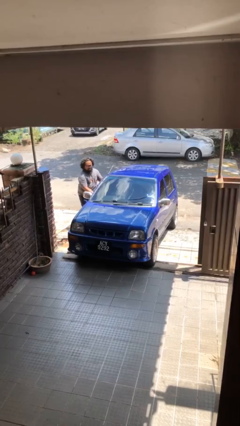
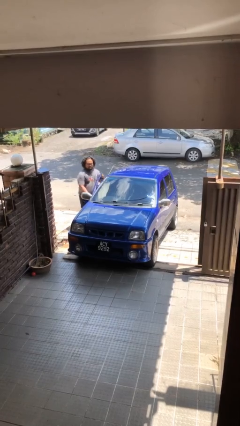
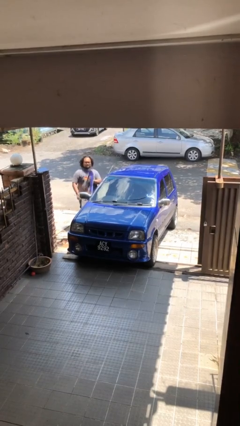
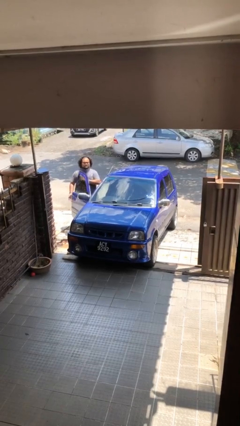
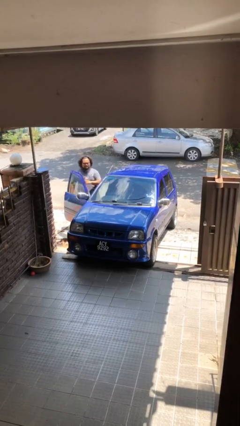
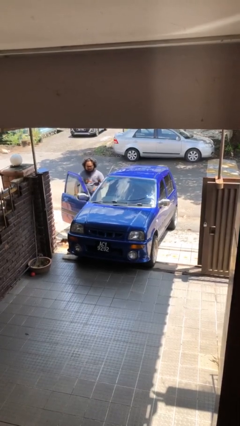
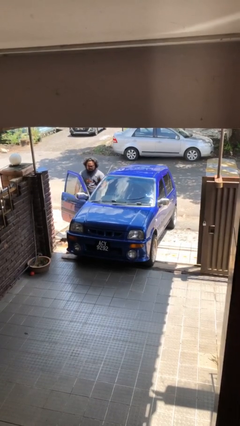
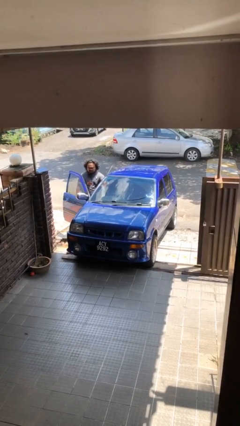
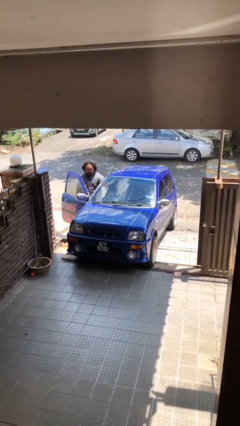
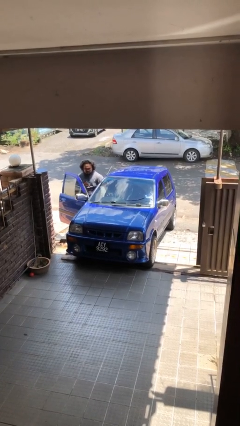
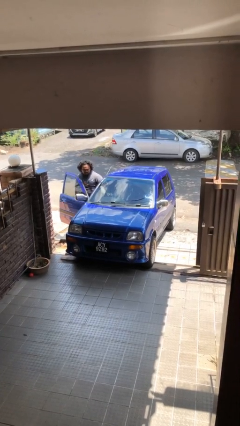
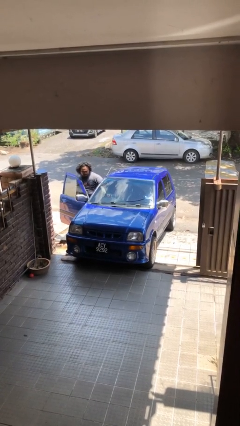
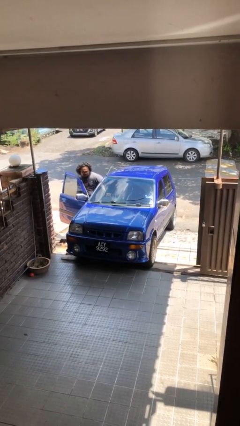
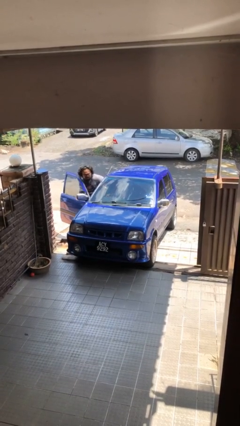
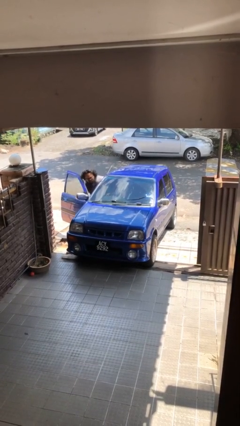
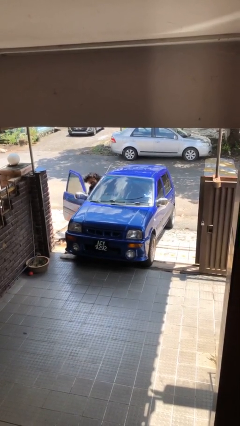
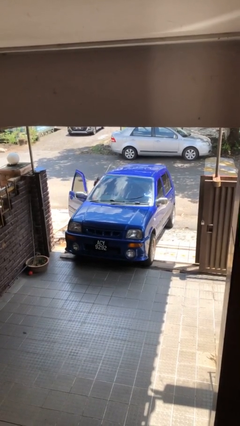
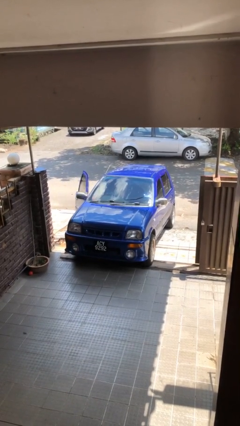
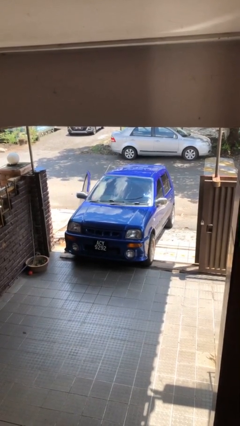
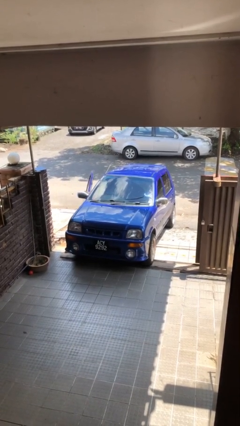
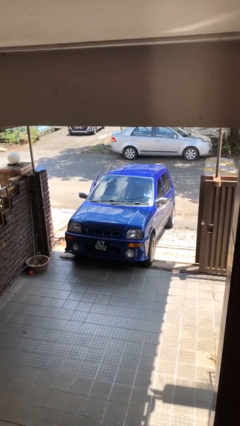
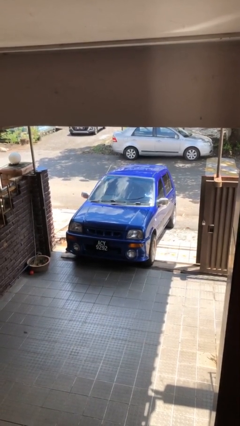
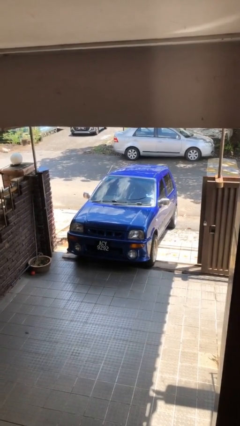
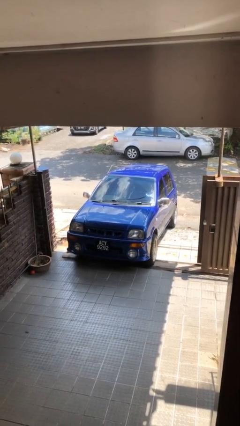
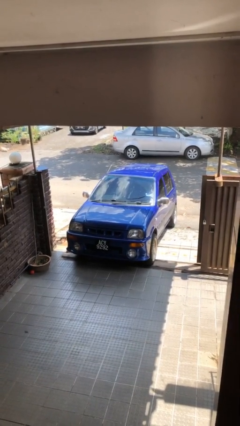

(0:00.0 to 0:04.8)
car picks up person

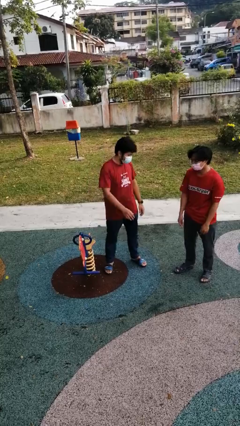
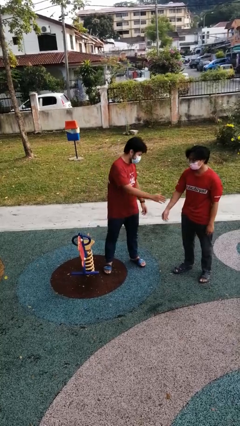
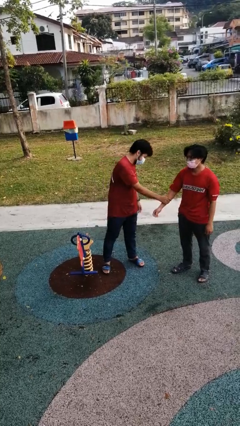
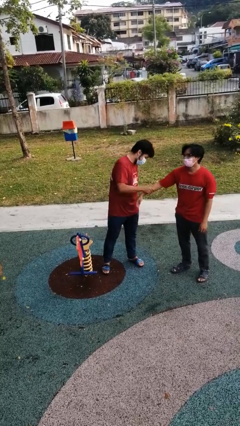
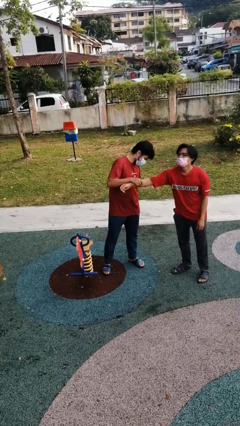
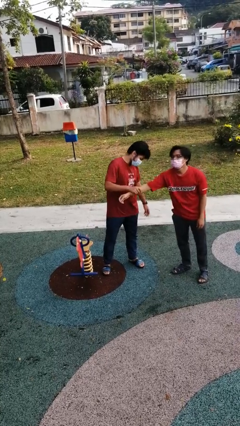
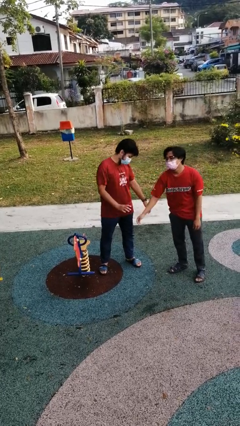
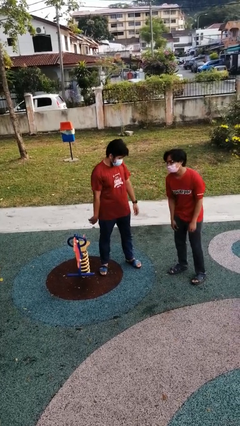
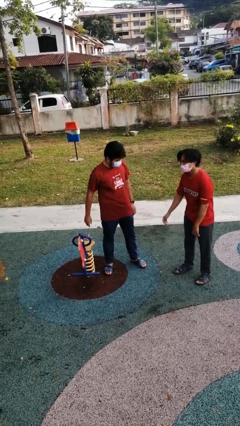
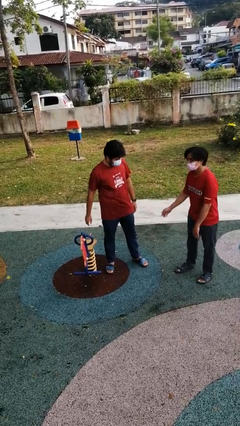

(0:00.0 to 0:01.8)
person grabs person by forearm

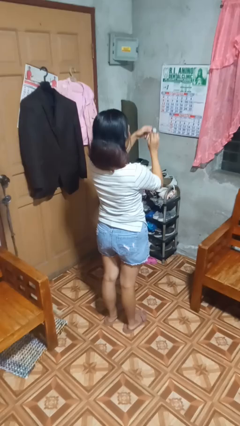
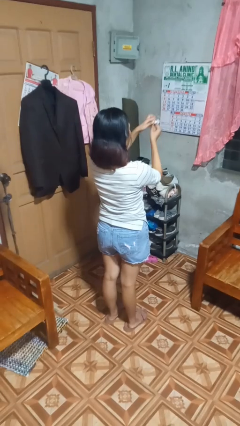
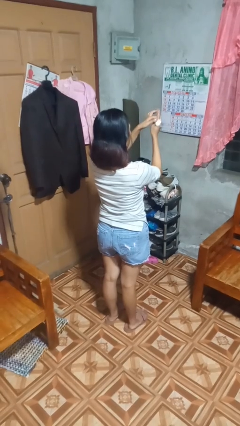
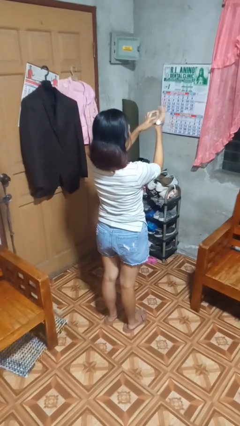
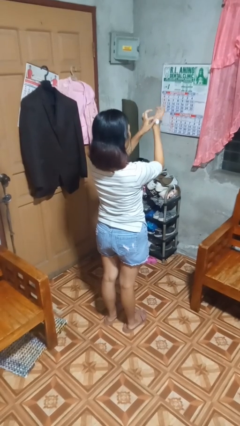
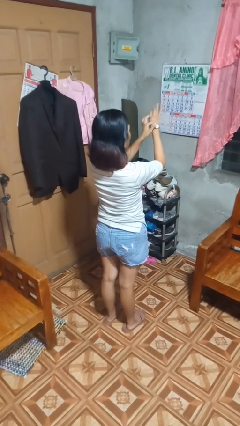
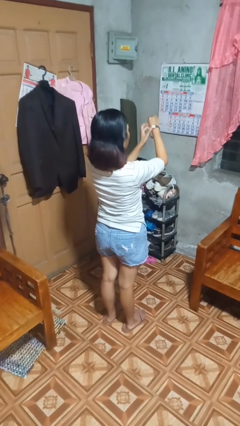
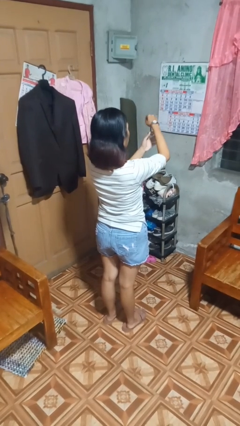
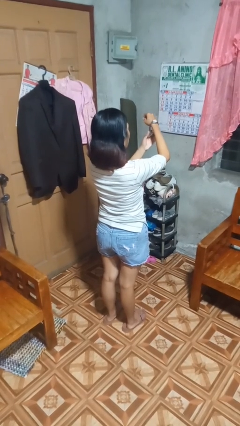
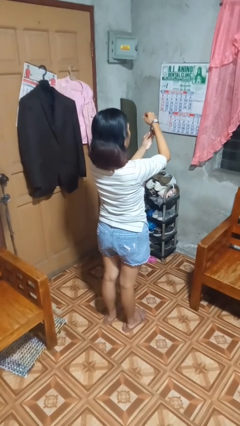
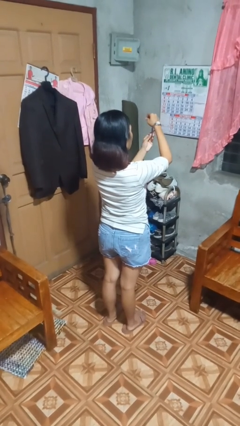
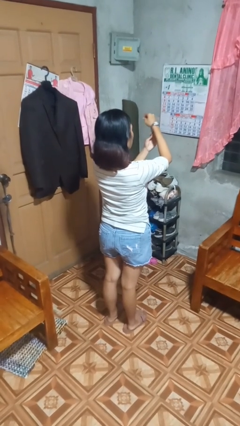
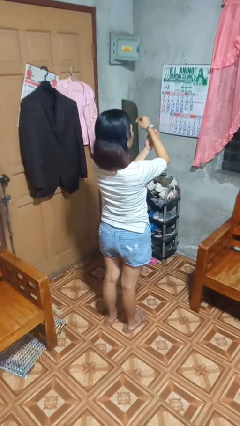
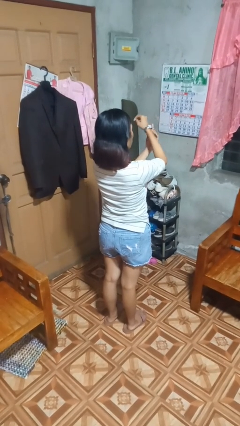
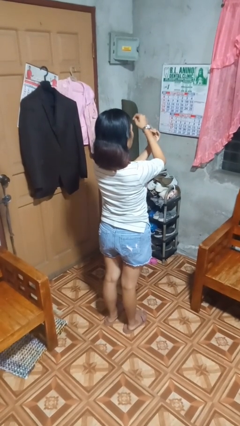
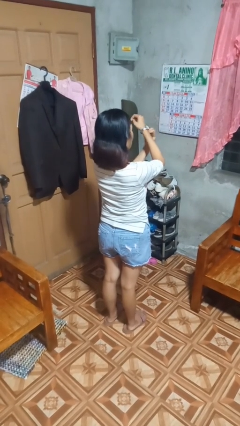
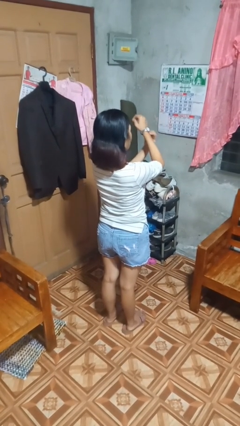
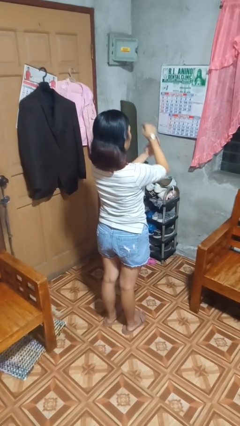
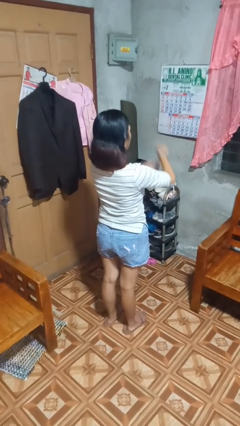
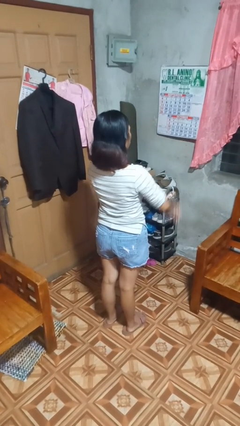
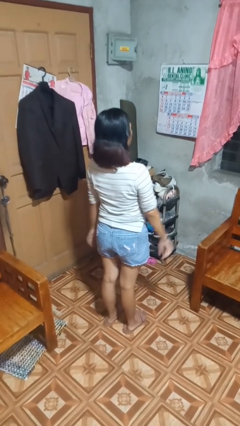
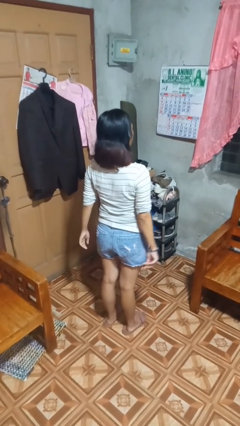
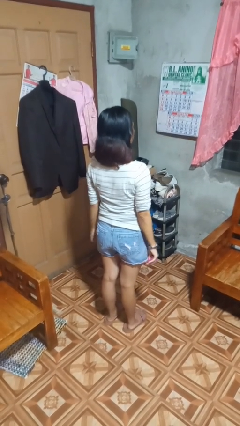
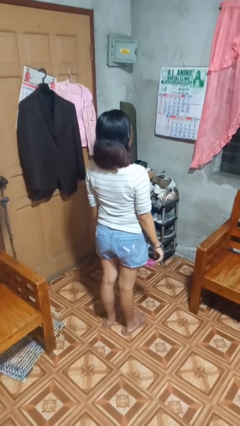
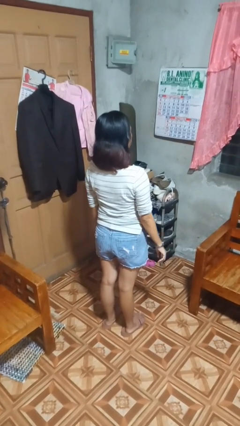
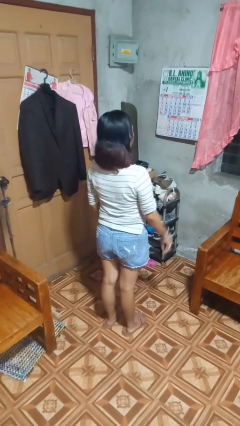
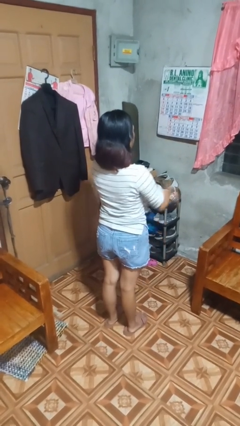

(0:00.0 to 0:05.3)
person puts on wristwatch

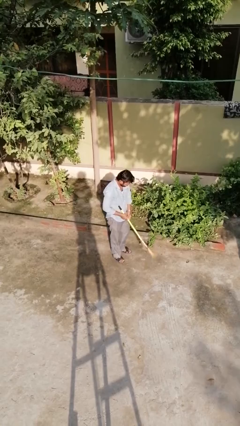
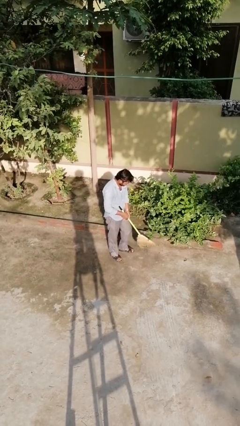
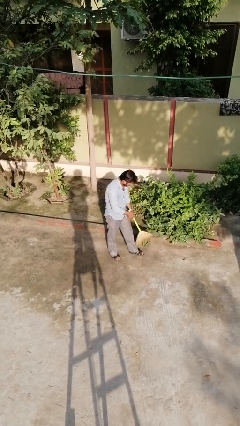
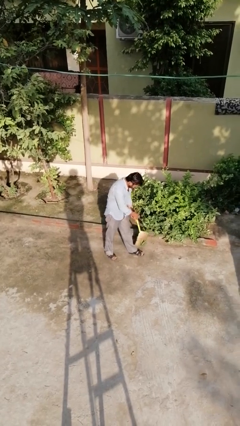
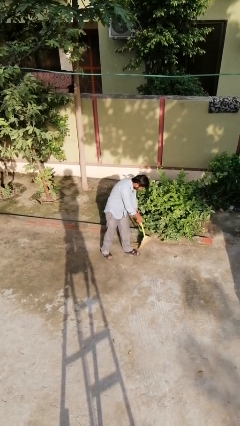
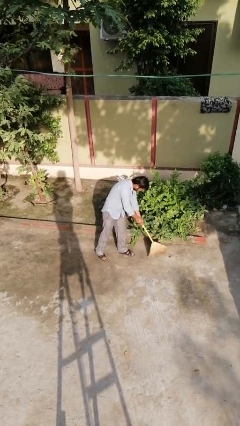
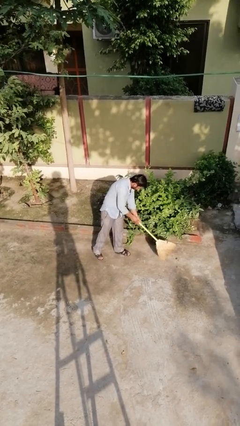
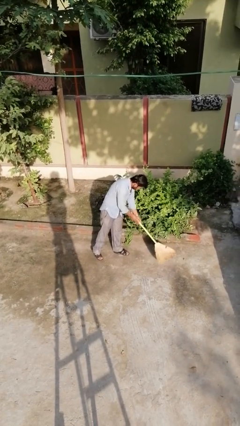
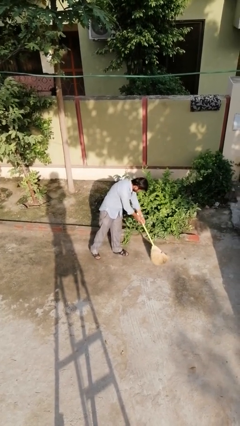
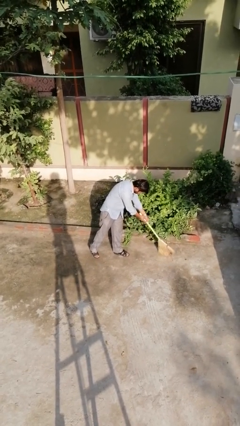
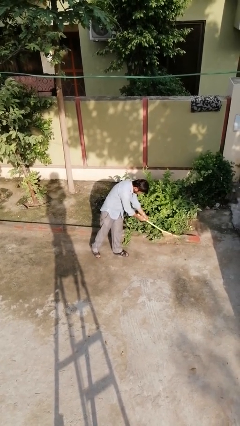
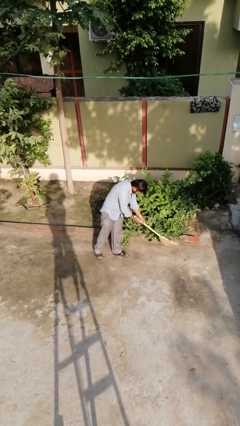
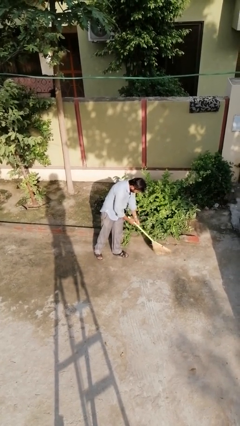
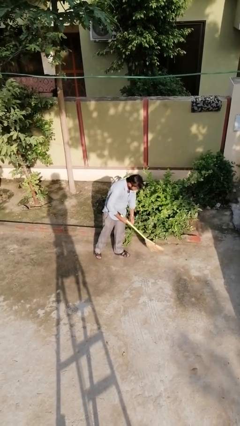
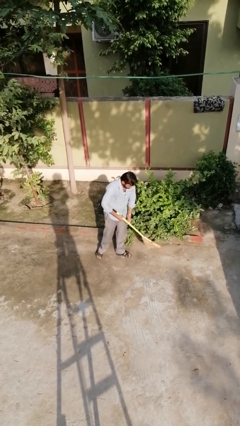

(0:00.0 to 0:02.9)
person sweeps floor

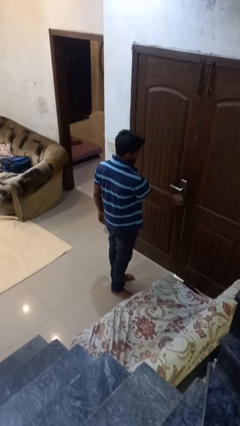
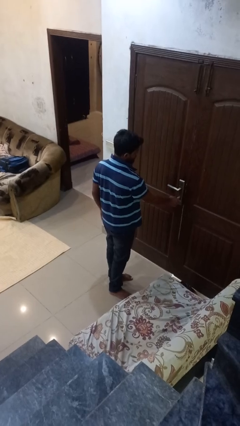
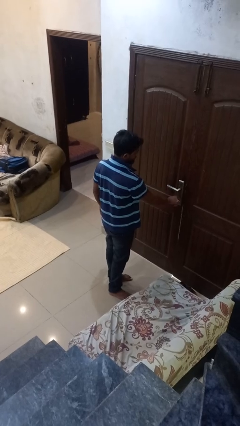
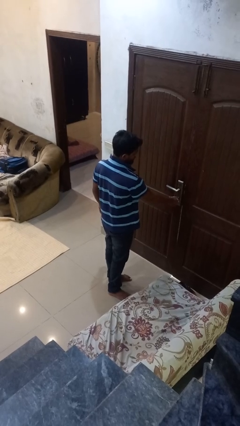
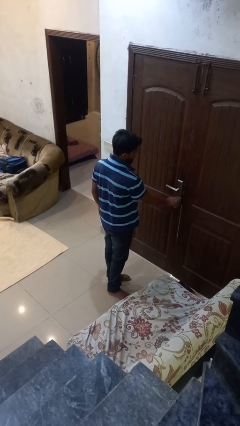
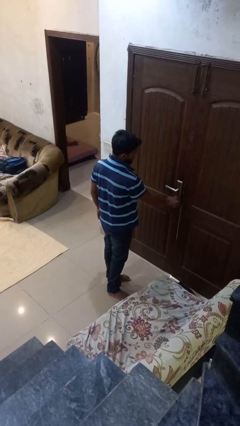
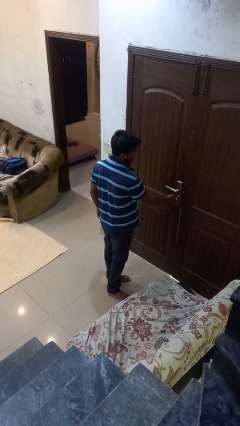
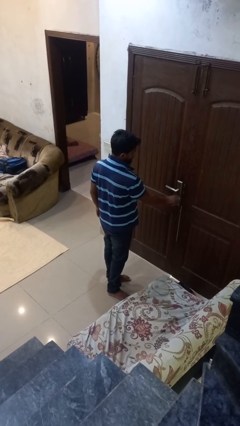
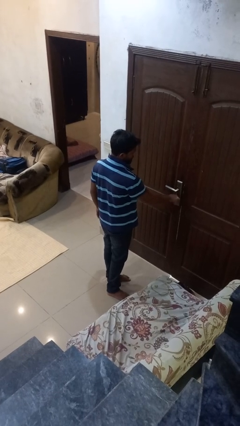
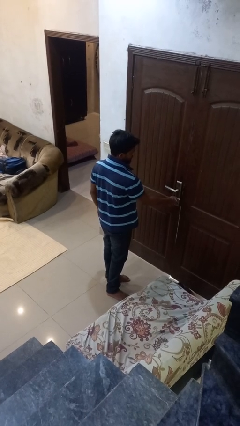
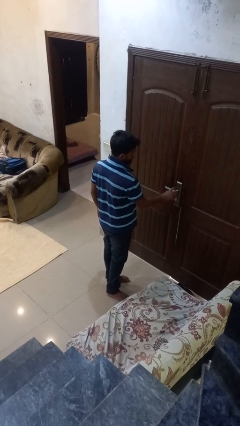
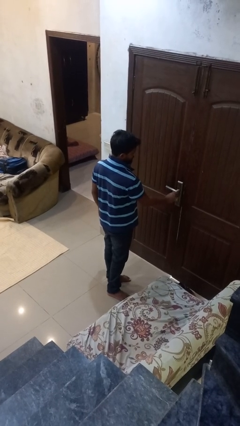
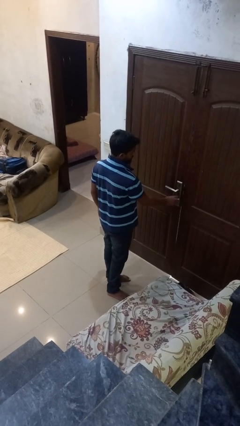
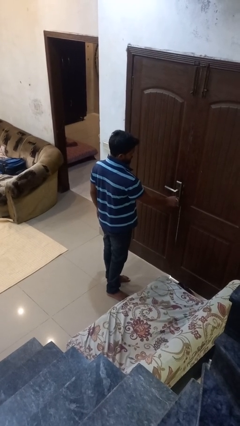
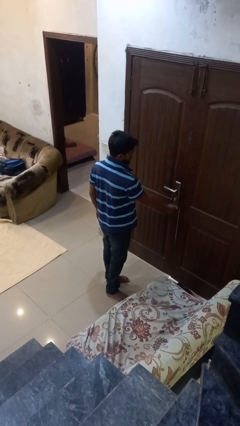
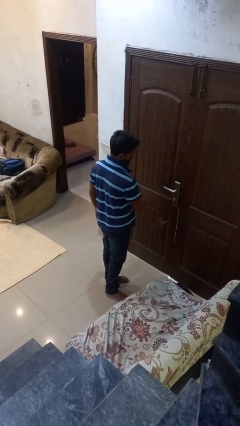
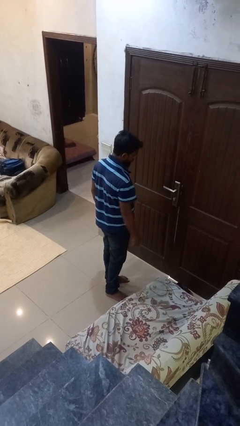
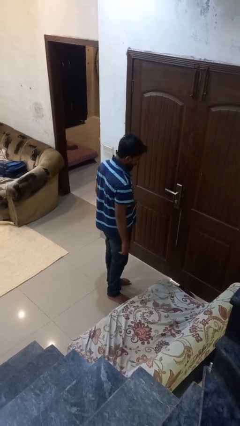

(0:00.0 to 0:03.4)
person locks door with keys
